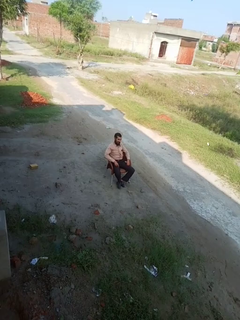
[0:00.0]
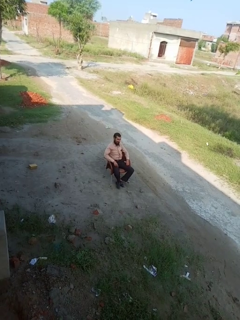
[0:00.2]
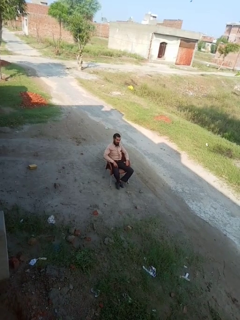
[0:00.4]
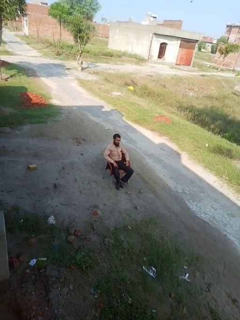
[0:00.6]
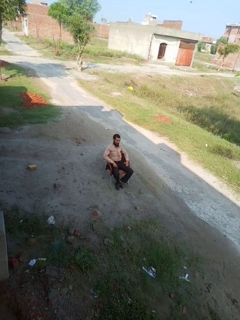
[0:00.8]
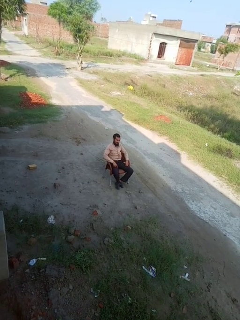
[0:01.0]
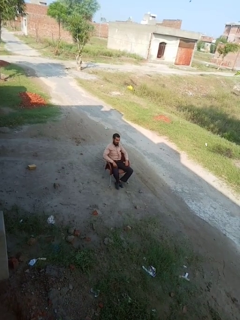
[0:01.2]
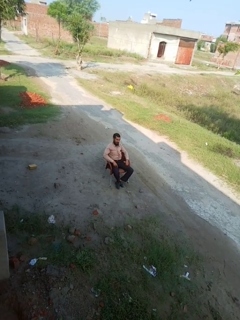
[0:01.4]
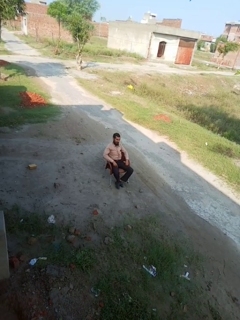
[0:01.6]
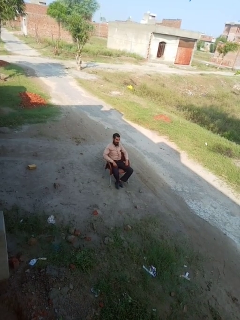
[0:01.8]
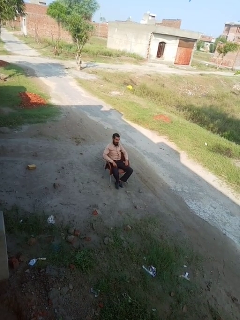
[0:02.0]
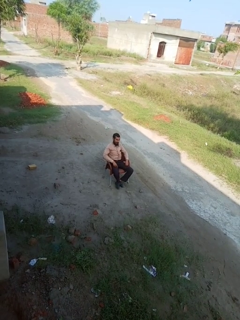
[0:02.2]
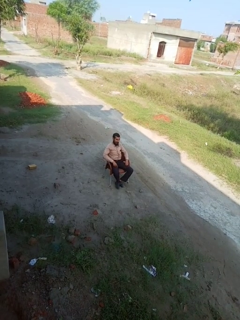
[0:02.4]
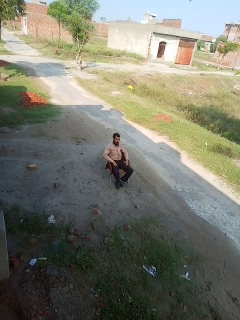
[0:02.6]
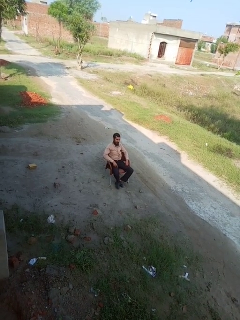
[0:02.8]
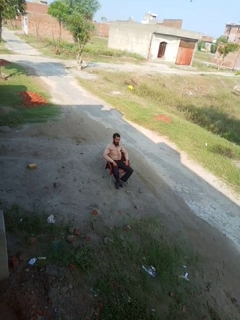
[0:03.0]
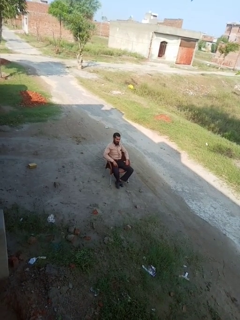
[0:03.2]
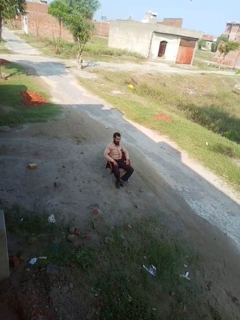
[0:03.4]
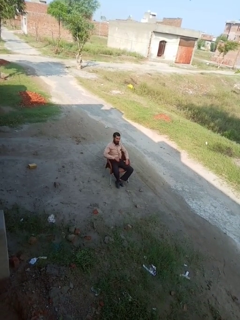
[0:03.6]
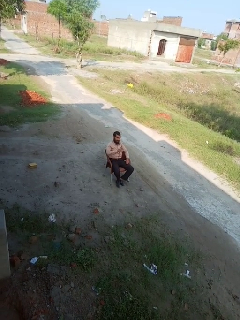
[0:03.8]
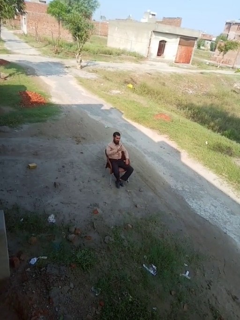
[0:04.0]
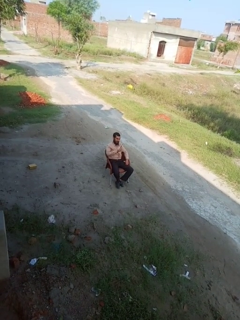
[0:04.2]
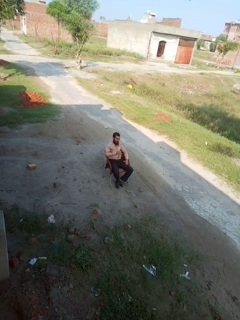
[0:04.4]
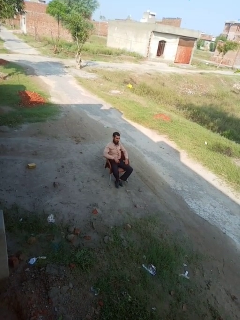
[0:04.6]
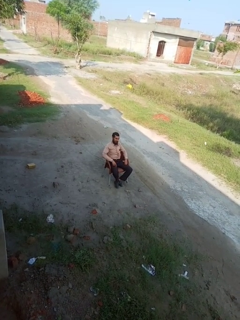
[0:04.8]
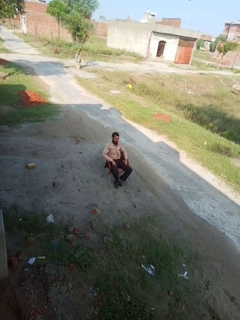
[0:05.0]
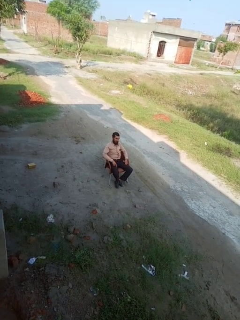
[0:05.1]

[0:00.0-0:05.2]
person gestures number one

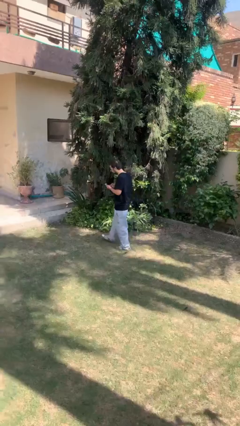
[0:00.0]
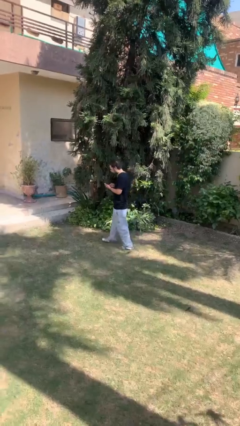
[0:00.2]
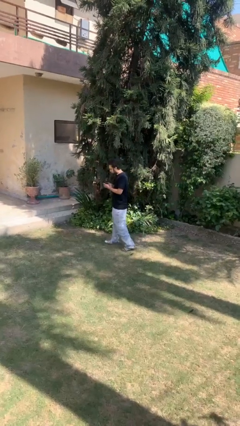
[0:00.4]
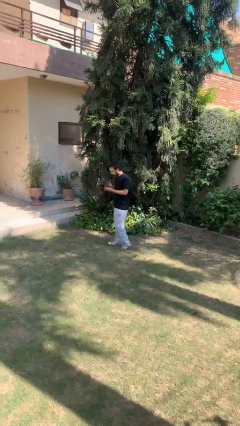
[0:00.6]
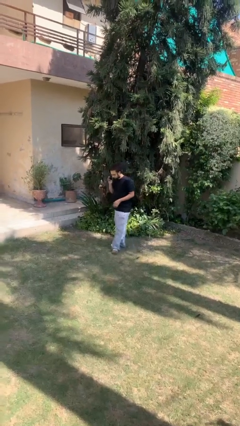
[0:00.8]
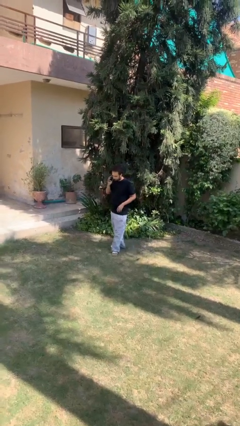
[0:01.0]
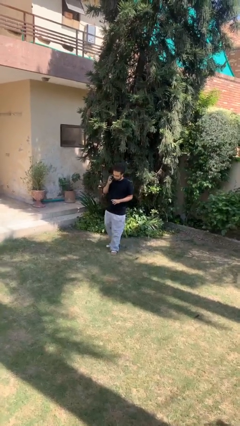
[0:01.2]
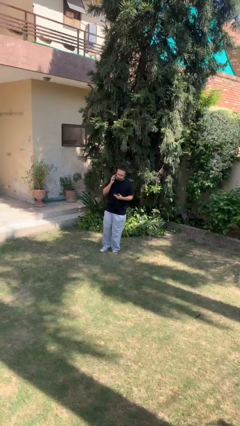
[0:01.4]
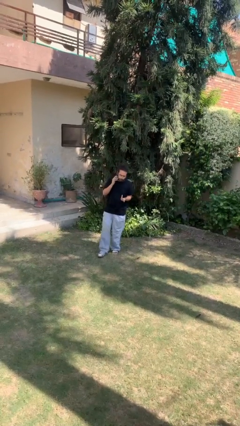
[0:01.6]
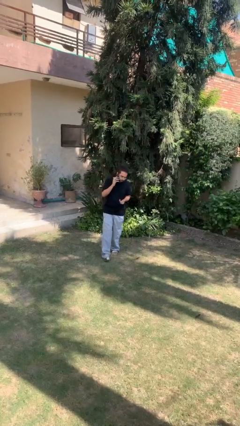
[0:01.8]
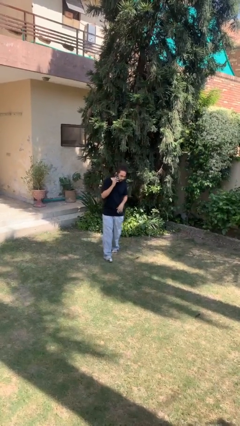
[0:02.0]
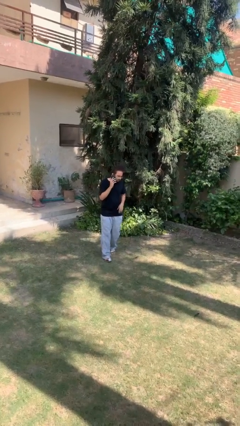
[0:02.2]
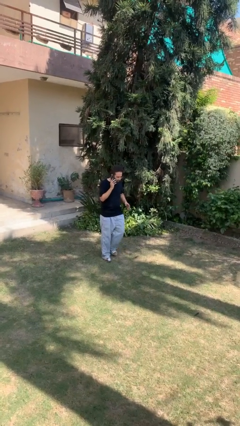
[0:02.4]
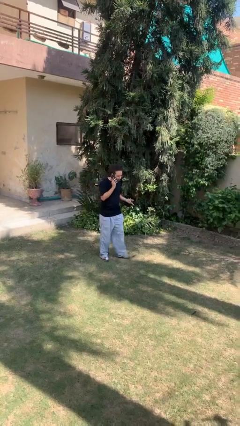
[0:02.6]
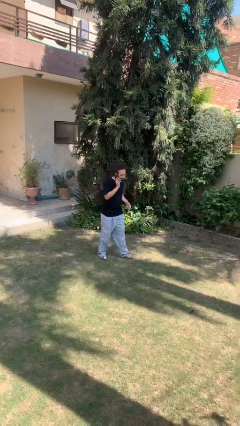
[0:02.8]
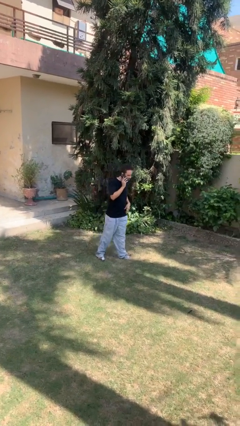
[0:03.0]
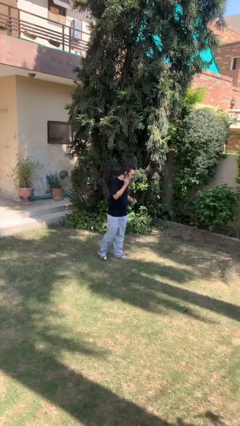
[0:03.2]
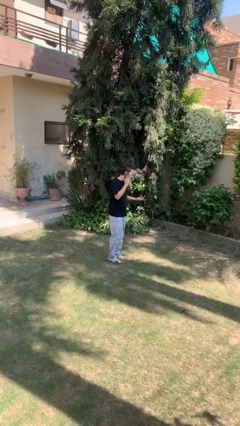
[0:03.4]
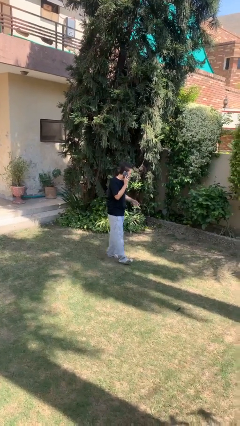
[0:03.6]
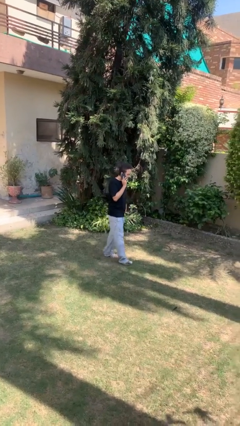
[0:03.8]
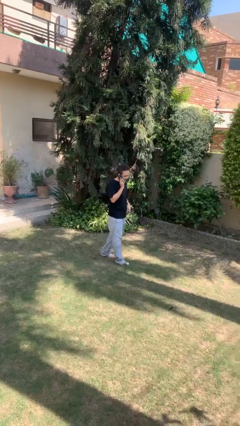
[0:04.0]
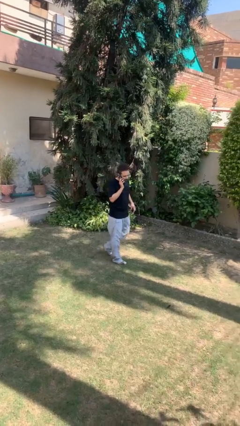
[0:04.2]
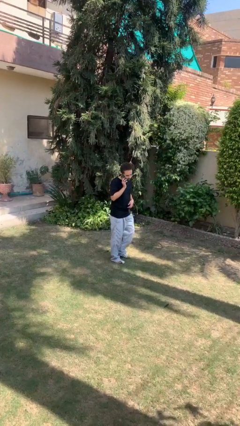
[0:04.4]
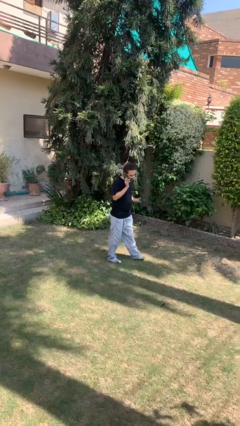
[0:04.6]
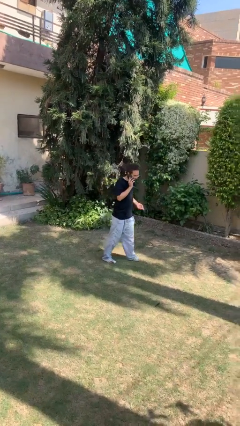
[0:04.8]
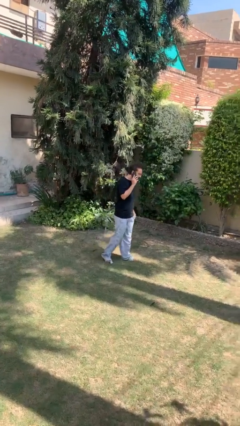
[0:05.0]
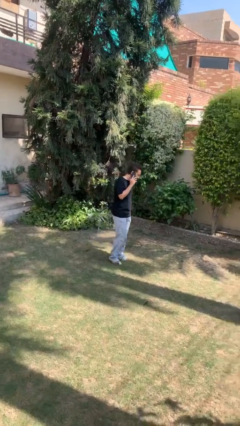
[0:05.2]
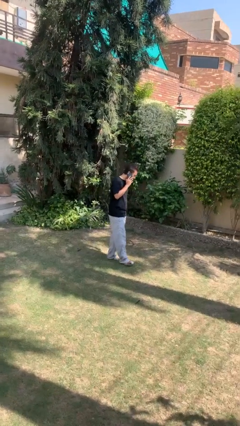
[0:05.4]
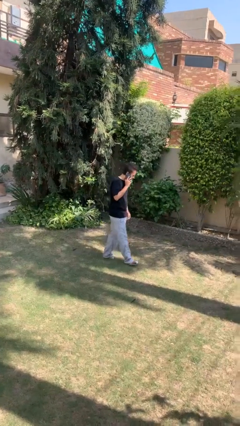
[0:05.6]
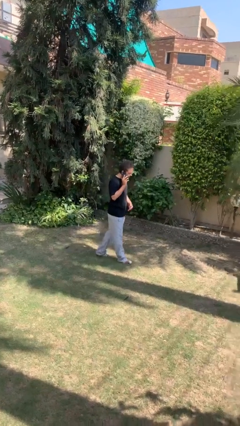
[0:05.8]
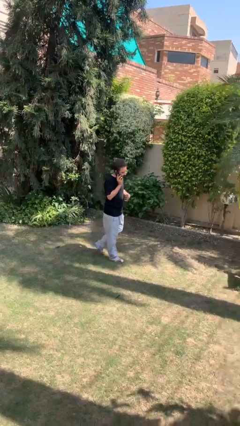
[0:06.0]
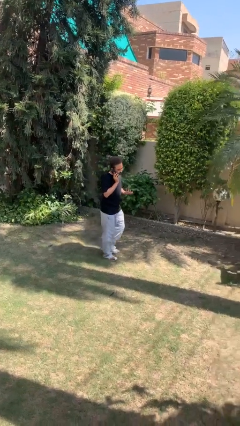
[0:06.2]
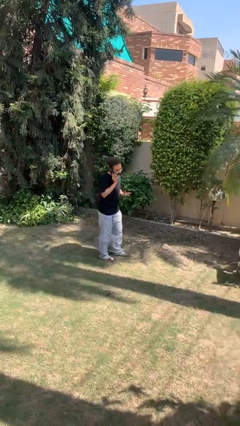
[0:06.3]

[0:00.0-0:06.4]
person talks on phone

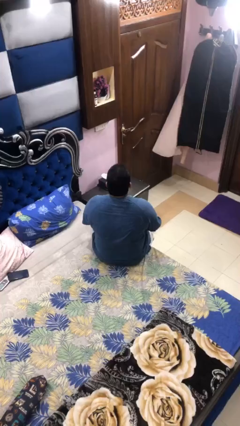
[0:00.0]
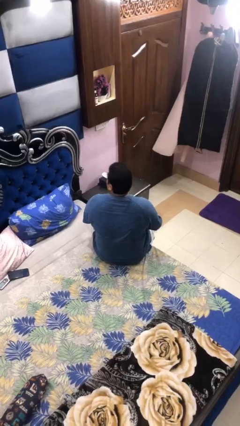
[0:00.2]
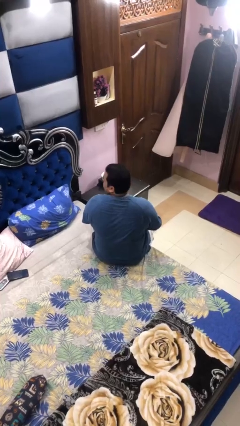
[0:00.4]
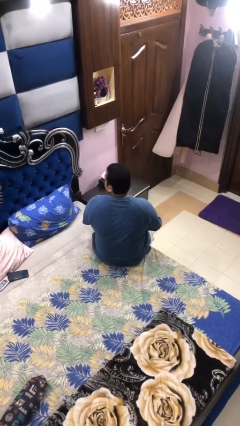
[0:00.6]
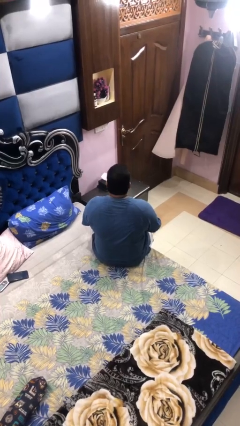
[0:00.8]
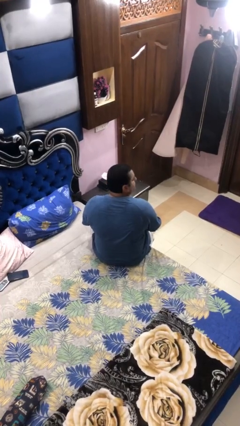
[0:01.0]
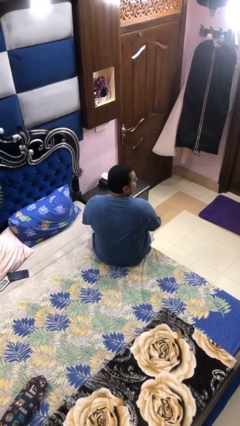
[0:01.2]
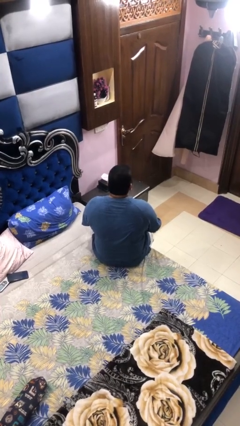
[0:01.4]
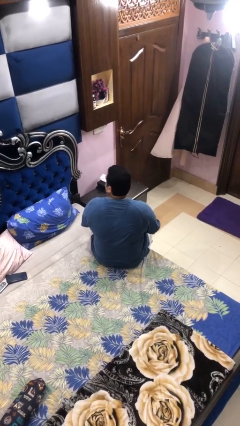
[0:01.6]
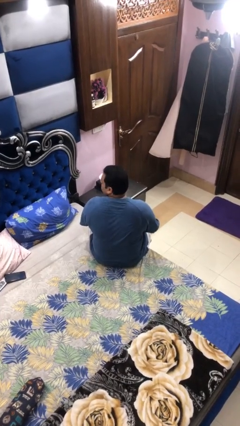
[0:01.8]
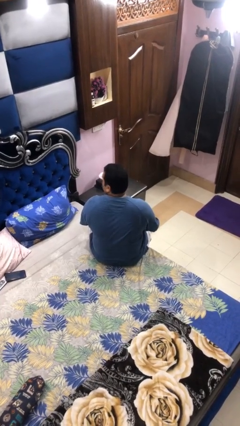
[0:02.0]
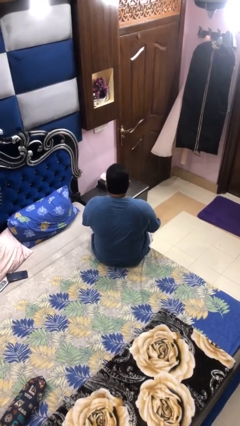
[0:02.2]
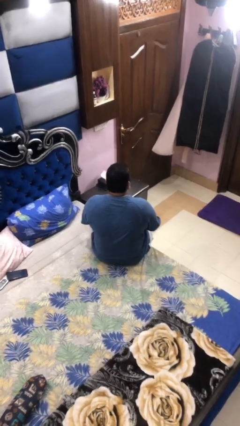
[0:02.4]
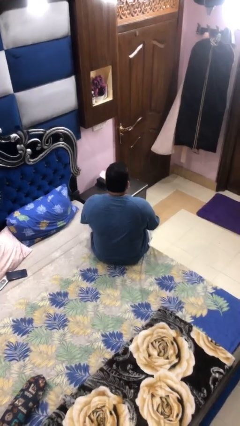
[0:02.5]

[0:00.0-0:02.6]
person shakes head

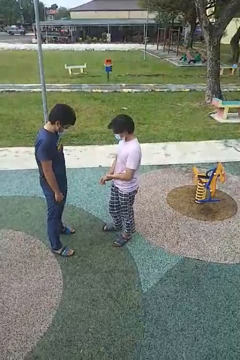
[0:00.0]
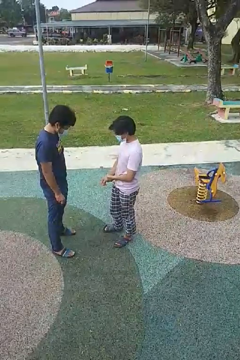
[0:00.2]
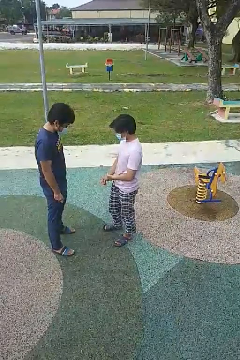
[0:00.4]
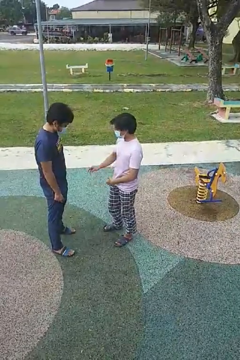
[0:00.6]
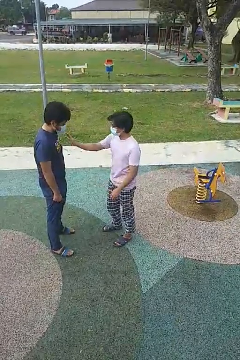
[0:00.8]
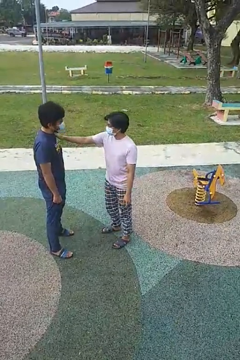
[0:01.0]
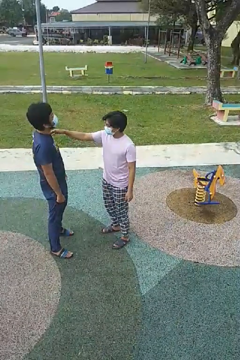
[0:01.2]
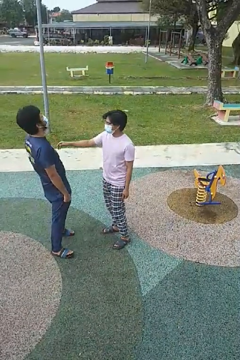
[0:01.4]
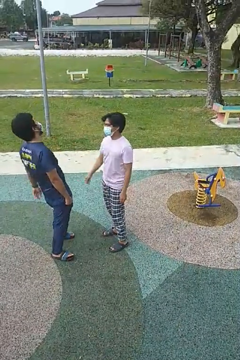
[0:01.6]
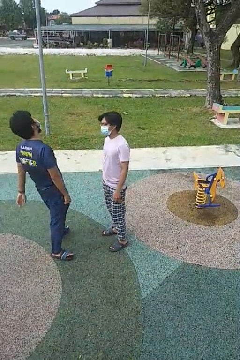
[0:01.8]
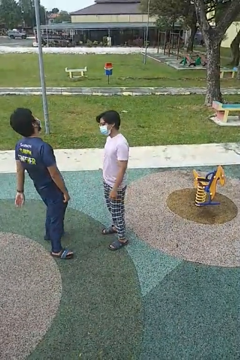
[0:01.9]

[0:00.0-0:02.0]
person shoves person

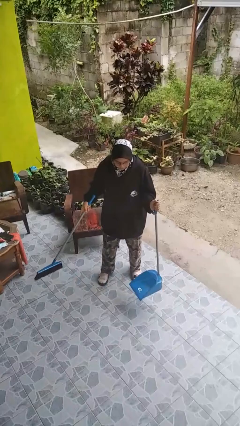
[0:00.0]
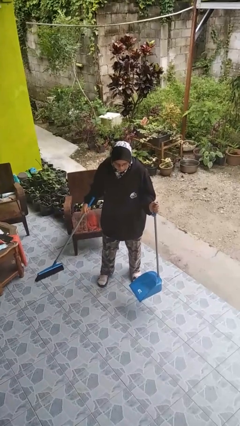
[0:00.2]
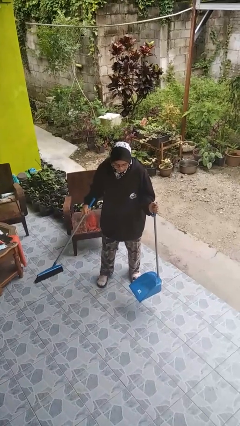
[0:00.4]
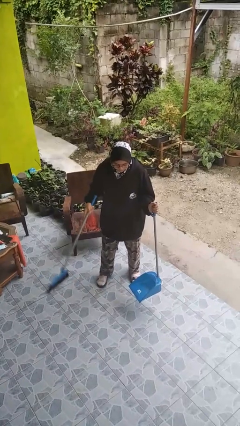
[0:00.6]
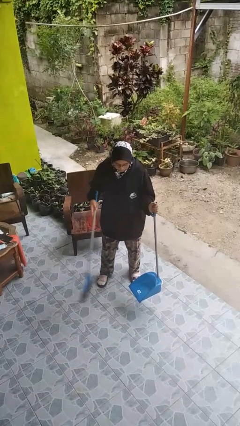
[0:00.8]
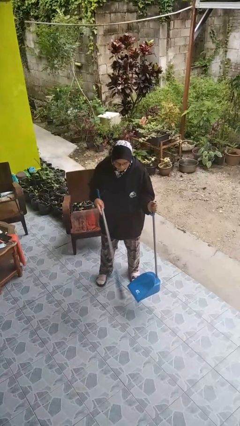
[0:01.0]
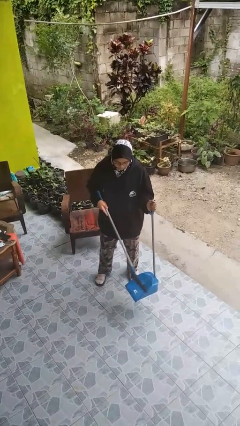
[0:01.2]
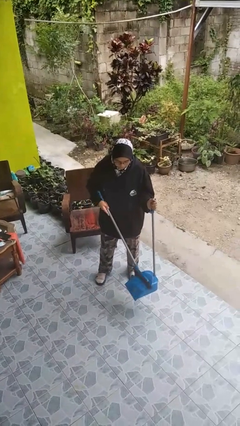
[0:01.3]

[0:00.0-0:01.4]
person sweeps floor

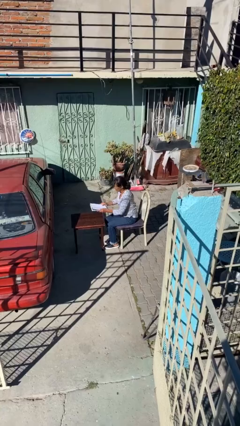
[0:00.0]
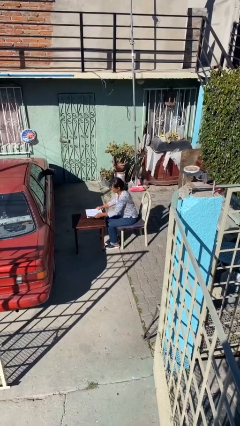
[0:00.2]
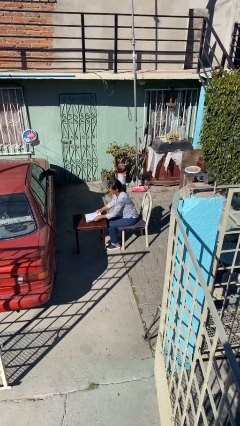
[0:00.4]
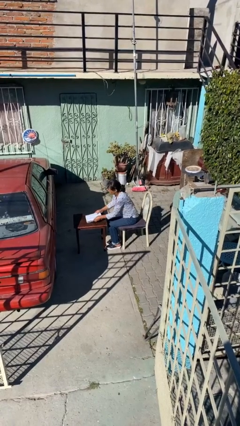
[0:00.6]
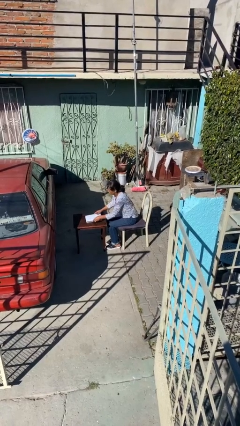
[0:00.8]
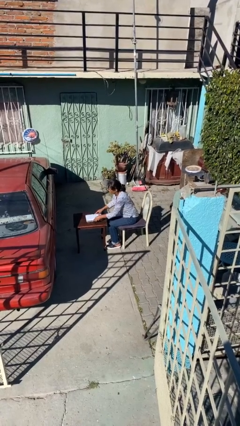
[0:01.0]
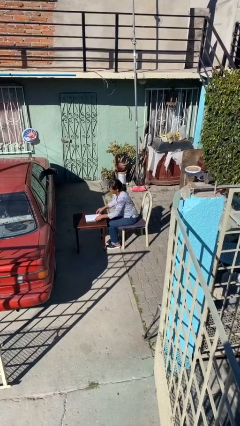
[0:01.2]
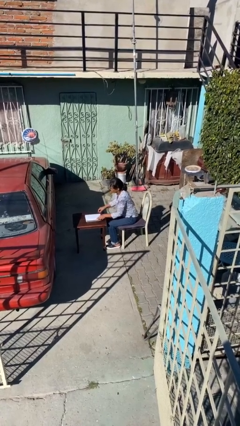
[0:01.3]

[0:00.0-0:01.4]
person puts down object on table
